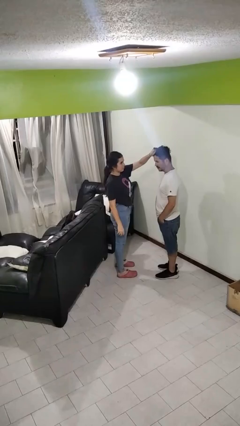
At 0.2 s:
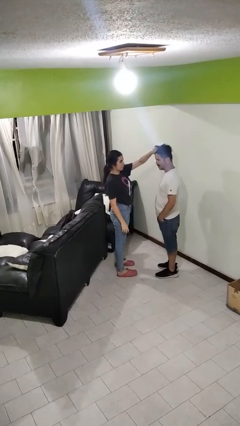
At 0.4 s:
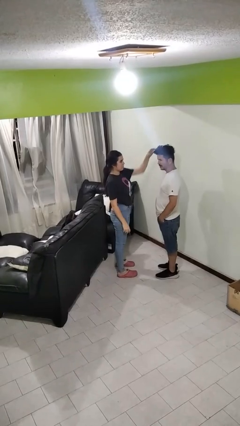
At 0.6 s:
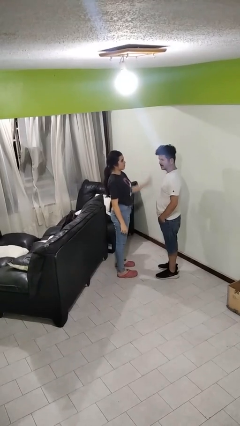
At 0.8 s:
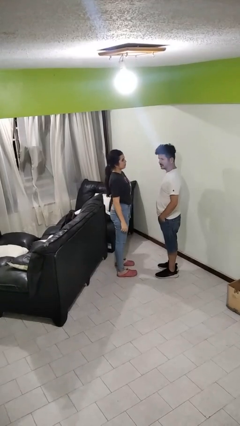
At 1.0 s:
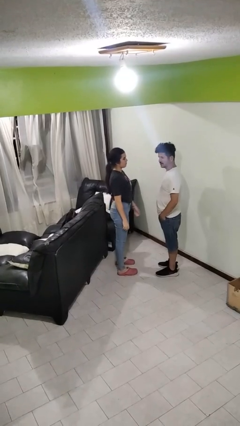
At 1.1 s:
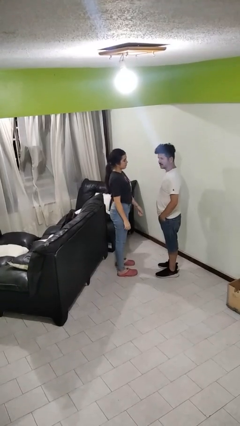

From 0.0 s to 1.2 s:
person grabs person by hair

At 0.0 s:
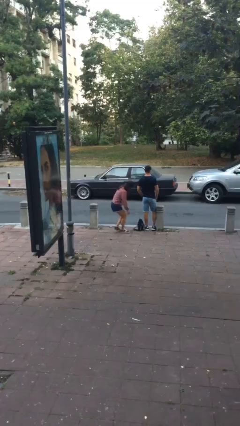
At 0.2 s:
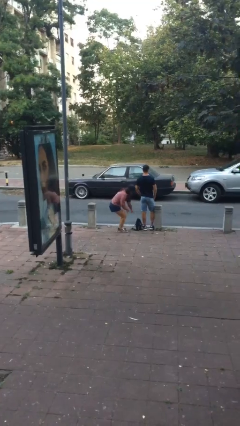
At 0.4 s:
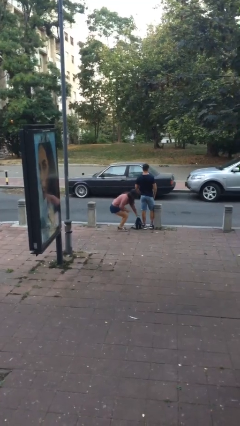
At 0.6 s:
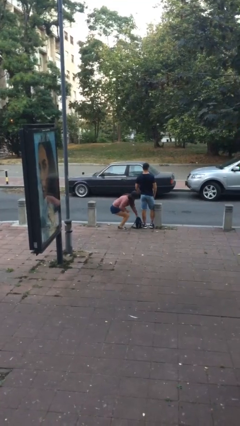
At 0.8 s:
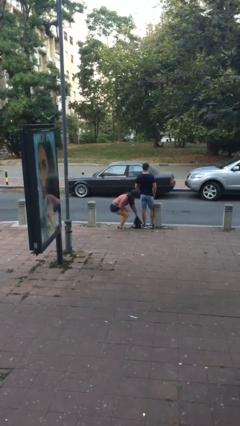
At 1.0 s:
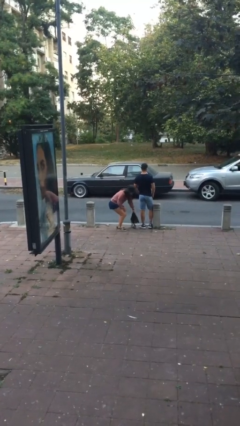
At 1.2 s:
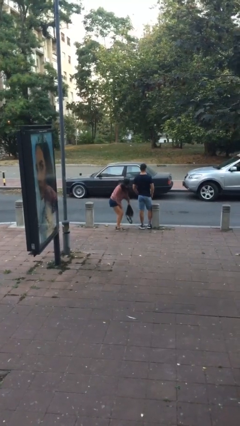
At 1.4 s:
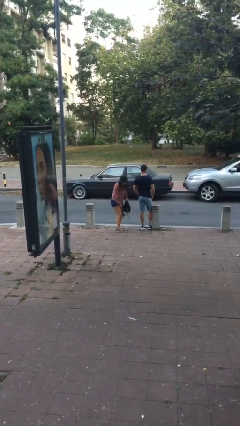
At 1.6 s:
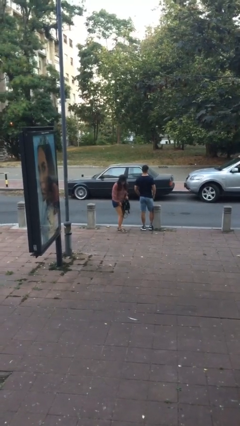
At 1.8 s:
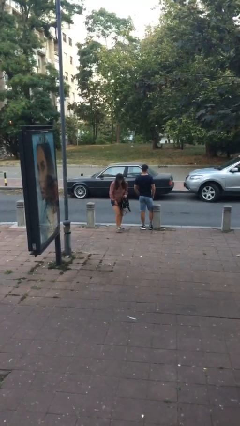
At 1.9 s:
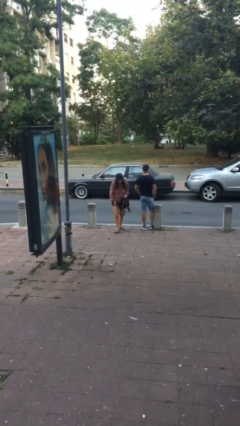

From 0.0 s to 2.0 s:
person steals object from person

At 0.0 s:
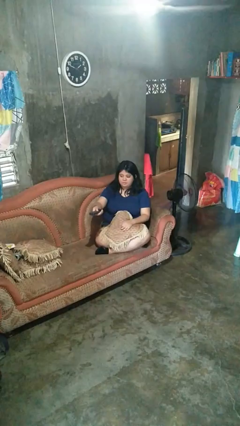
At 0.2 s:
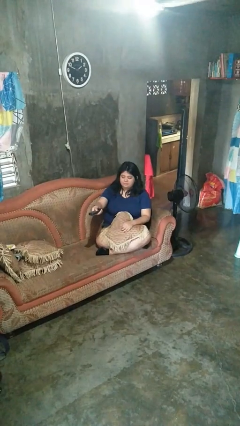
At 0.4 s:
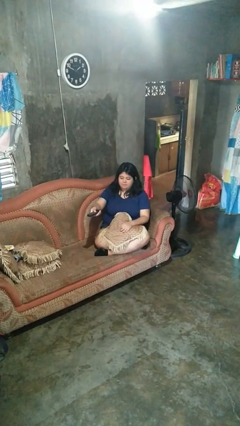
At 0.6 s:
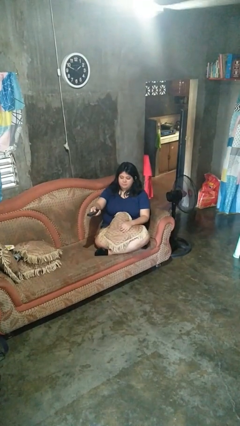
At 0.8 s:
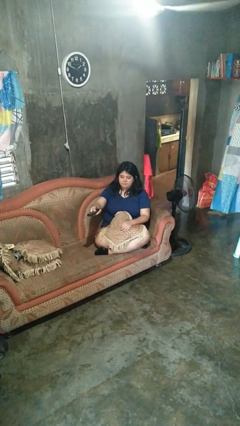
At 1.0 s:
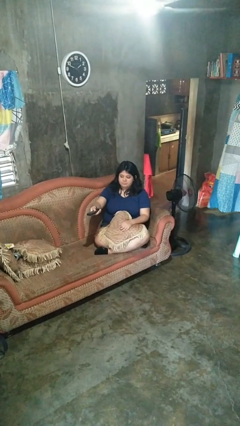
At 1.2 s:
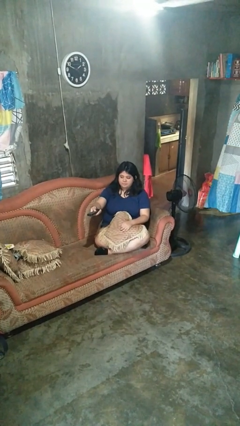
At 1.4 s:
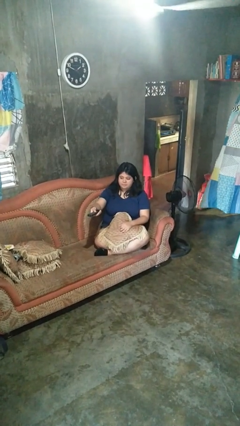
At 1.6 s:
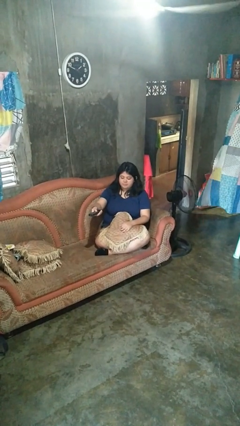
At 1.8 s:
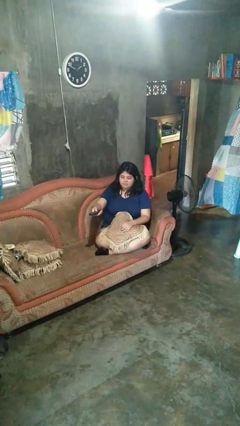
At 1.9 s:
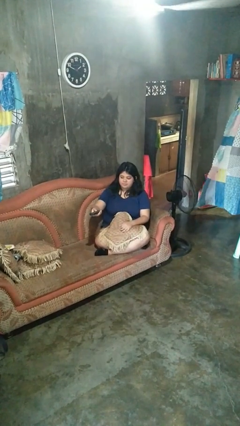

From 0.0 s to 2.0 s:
person uses television remote

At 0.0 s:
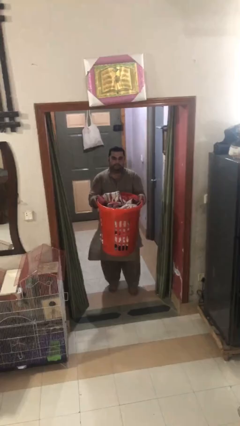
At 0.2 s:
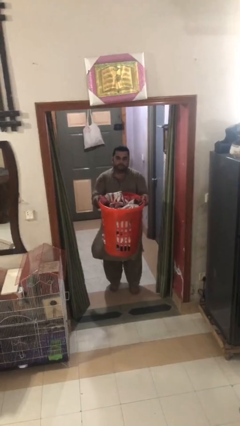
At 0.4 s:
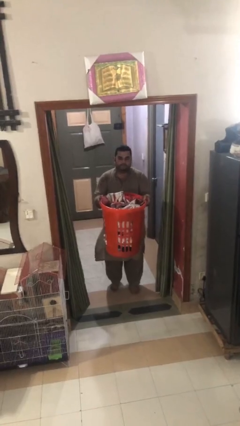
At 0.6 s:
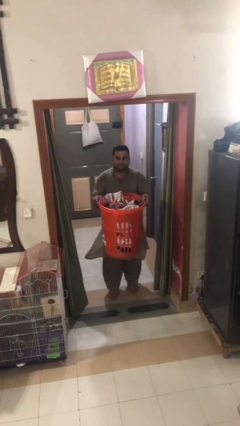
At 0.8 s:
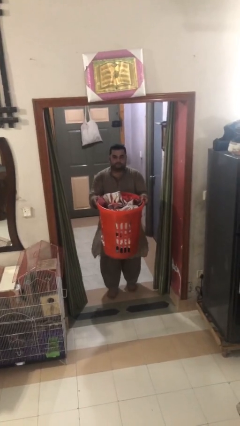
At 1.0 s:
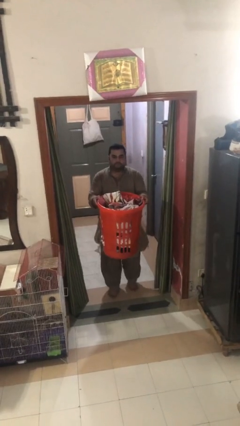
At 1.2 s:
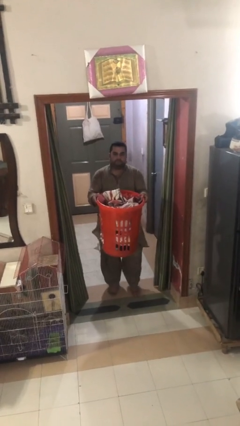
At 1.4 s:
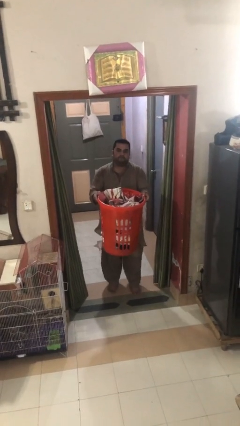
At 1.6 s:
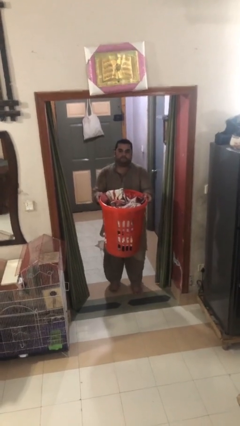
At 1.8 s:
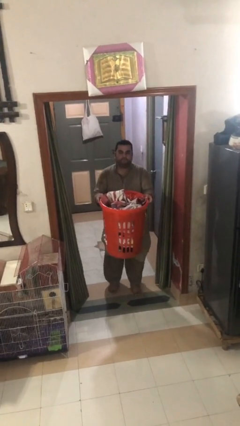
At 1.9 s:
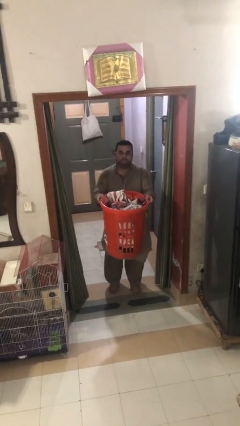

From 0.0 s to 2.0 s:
person carries laundry basket

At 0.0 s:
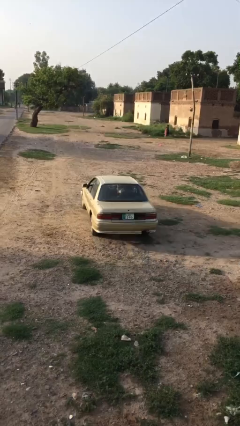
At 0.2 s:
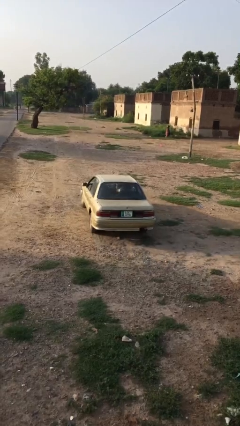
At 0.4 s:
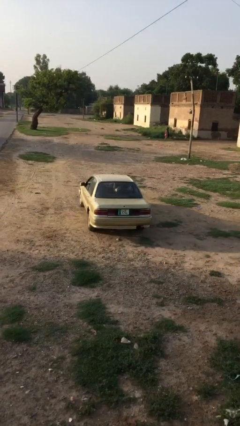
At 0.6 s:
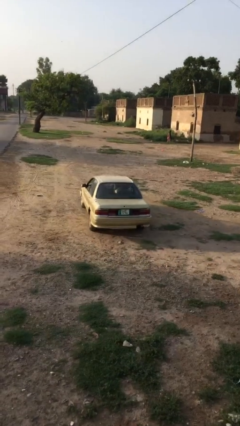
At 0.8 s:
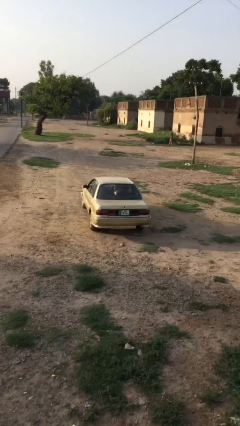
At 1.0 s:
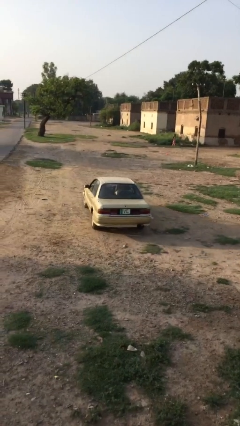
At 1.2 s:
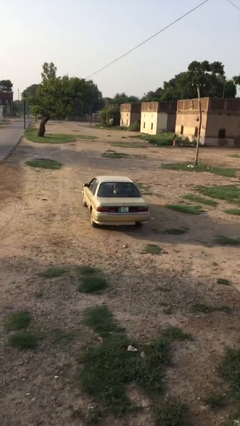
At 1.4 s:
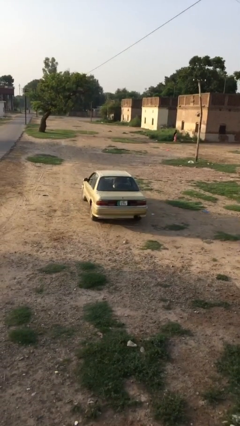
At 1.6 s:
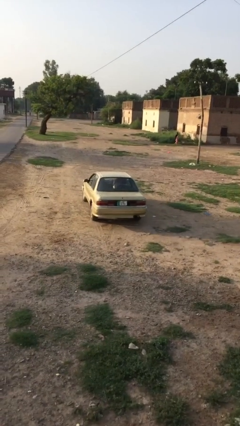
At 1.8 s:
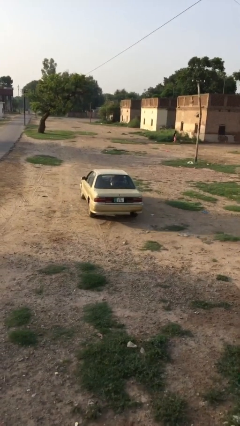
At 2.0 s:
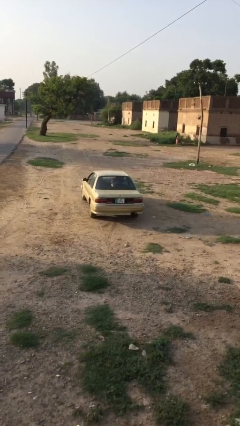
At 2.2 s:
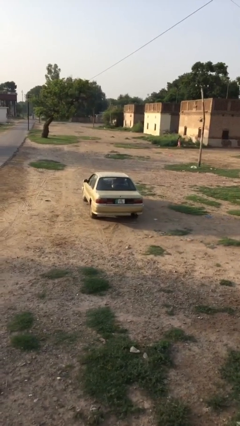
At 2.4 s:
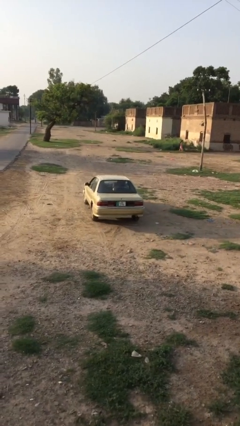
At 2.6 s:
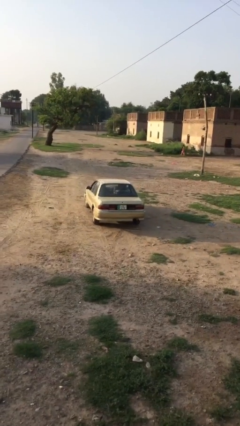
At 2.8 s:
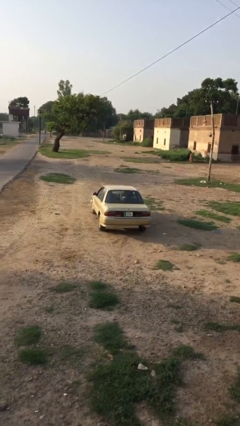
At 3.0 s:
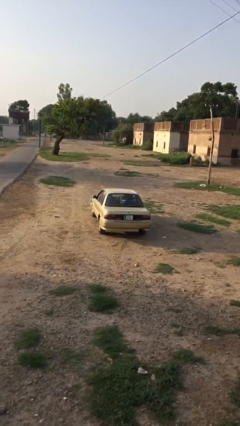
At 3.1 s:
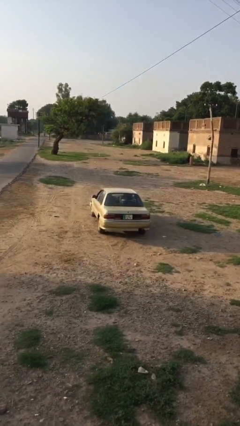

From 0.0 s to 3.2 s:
car drops off person

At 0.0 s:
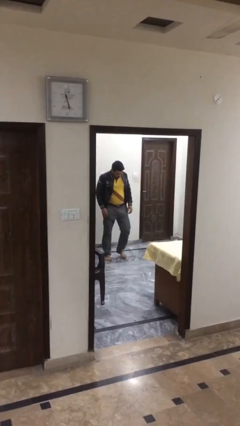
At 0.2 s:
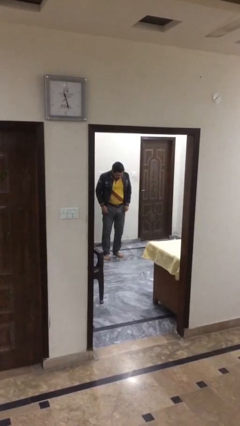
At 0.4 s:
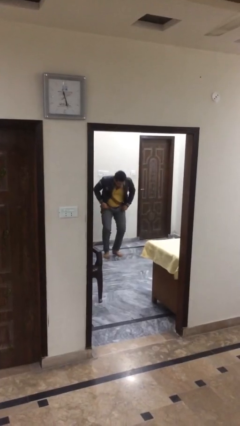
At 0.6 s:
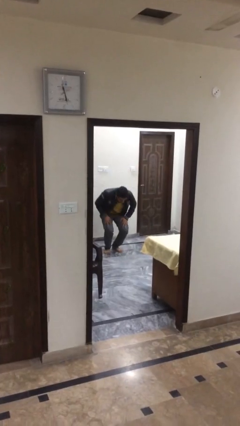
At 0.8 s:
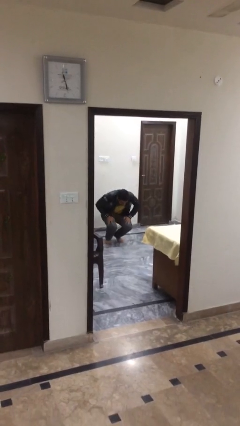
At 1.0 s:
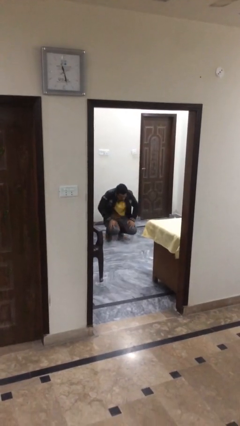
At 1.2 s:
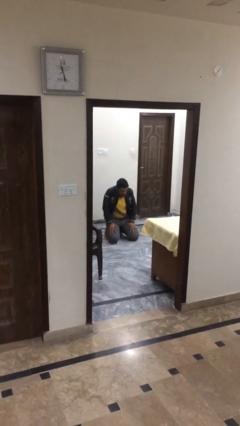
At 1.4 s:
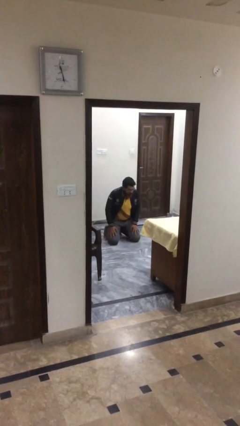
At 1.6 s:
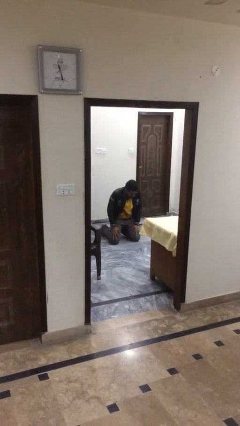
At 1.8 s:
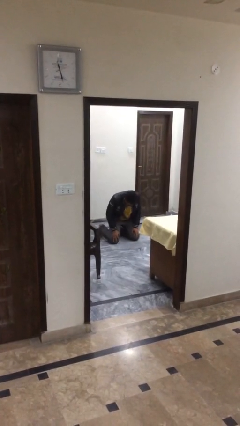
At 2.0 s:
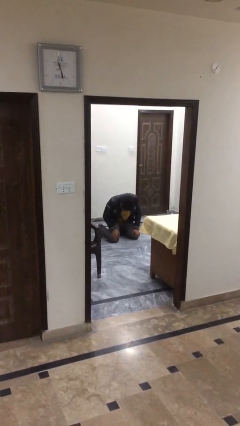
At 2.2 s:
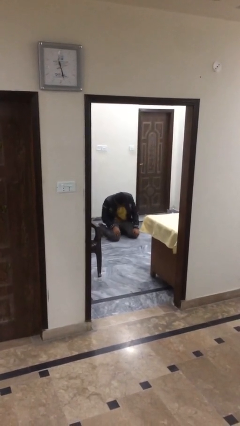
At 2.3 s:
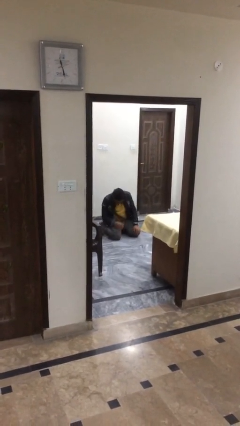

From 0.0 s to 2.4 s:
person sits down

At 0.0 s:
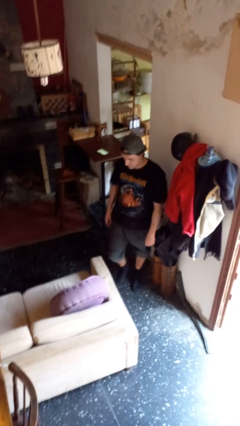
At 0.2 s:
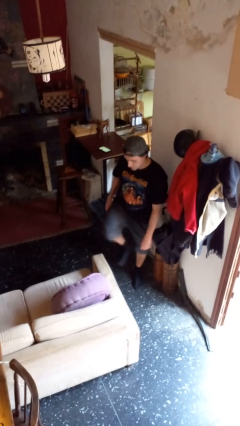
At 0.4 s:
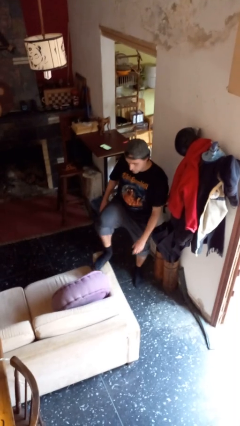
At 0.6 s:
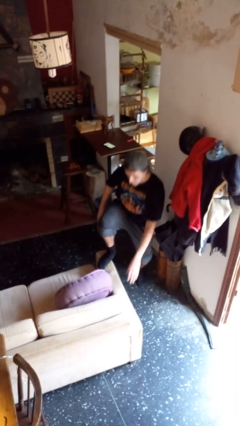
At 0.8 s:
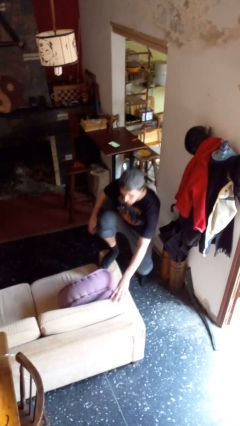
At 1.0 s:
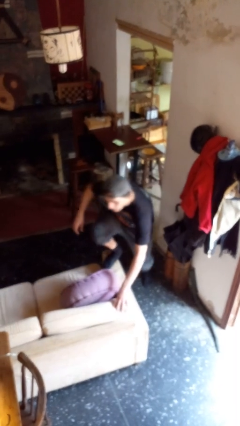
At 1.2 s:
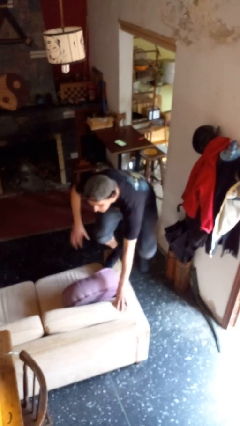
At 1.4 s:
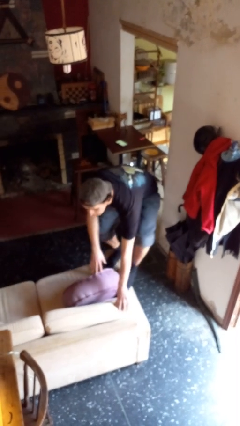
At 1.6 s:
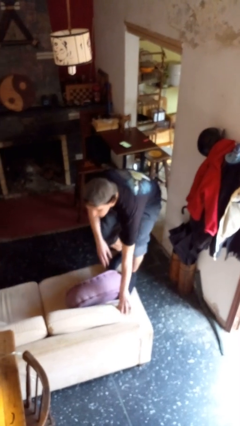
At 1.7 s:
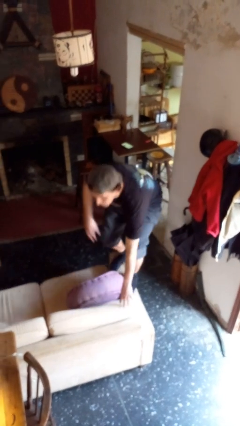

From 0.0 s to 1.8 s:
person climbs on couch

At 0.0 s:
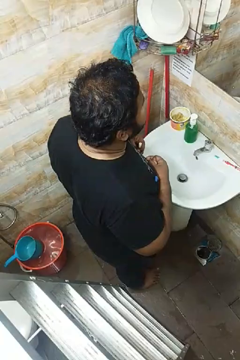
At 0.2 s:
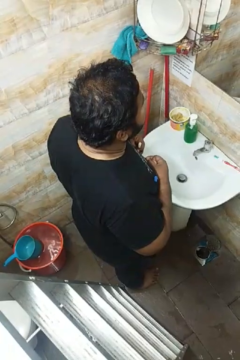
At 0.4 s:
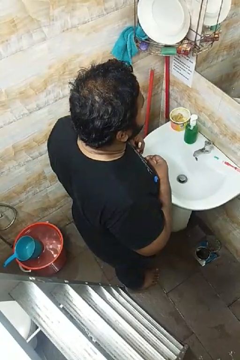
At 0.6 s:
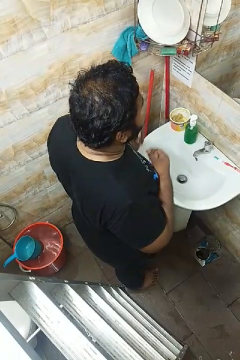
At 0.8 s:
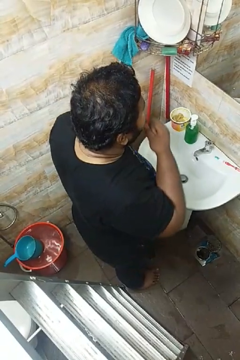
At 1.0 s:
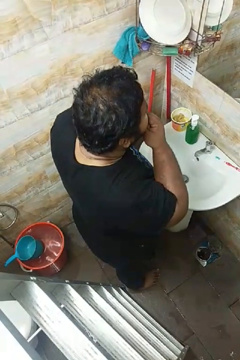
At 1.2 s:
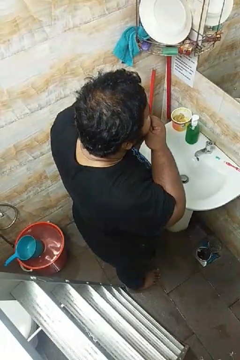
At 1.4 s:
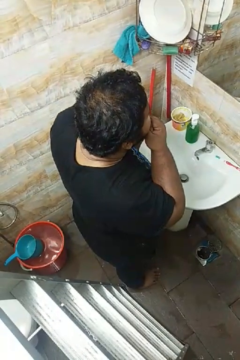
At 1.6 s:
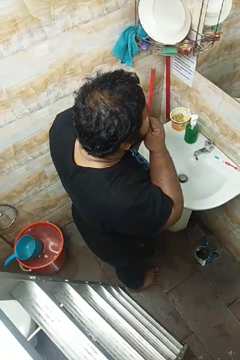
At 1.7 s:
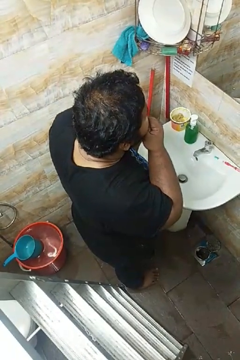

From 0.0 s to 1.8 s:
person flosses

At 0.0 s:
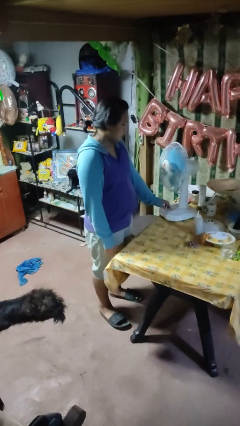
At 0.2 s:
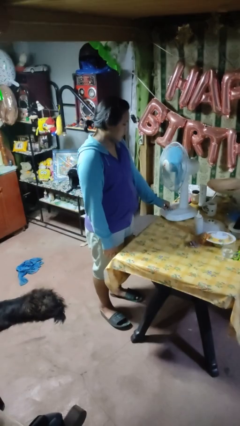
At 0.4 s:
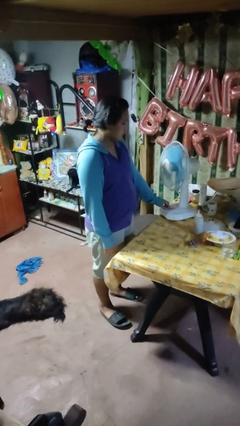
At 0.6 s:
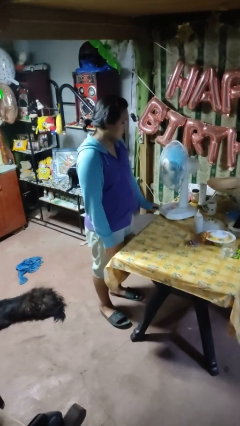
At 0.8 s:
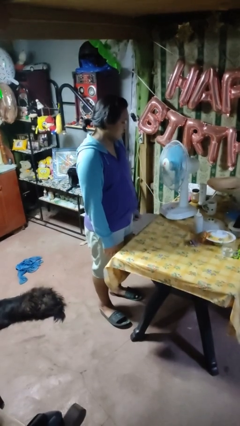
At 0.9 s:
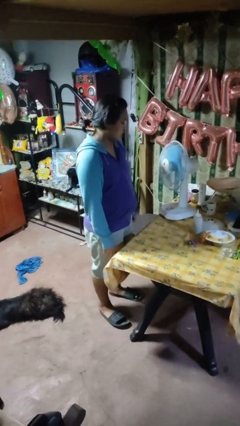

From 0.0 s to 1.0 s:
person turns on fan
